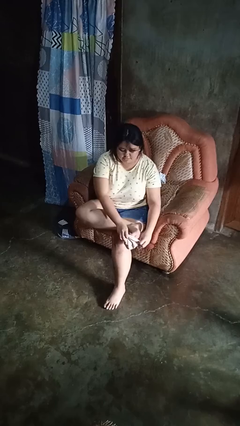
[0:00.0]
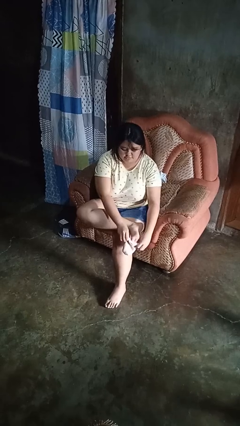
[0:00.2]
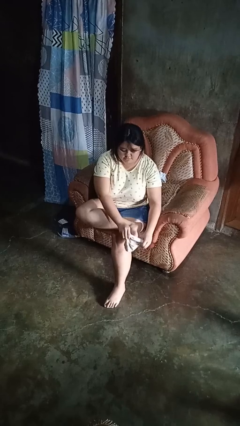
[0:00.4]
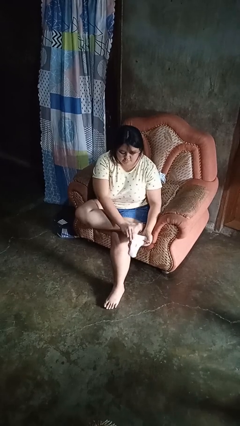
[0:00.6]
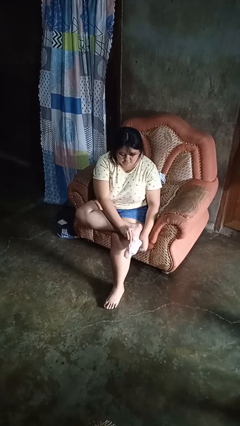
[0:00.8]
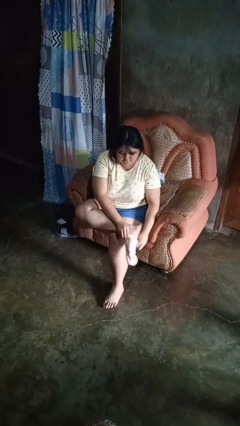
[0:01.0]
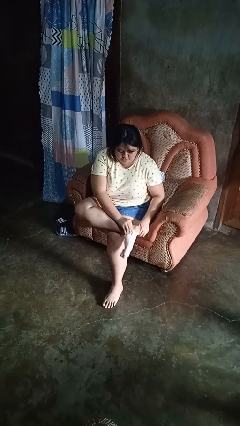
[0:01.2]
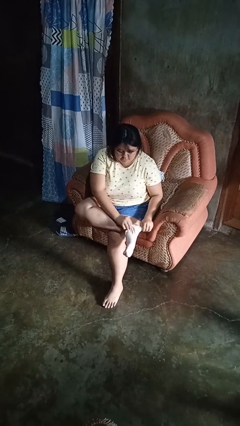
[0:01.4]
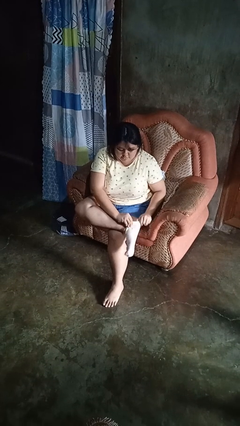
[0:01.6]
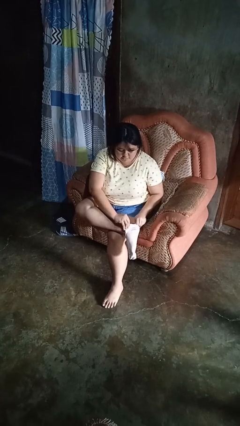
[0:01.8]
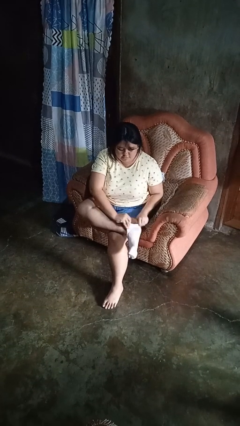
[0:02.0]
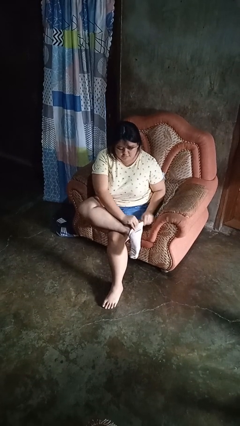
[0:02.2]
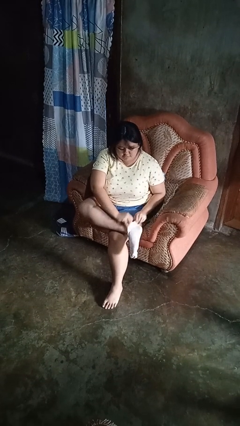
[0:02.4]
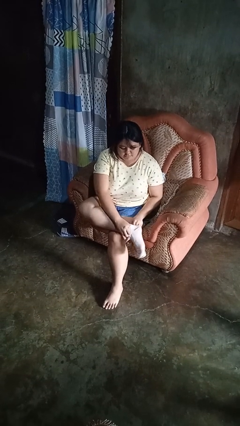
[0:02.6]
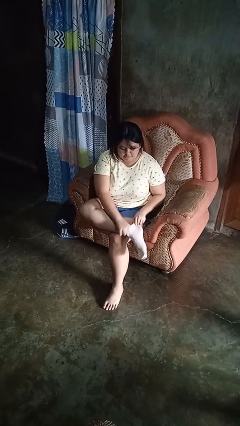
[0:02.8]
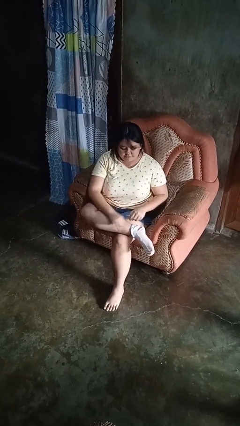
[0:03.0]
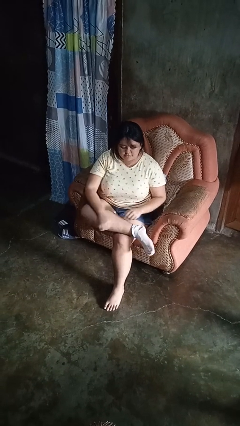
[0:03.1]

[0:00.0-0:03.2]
person puts on socks

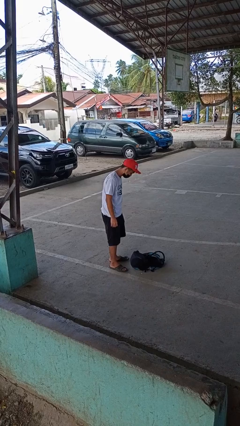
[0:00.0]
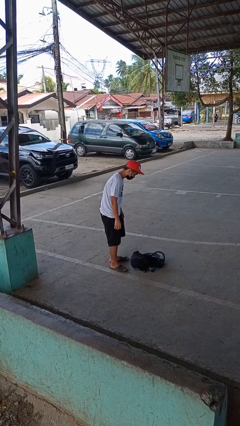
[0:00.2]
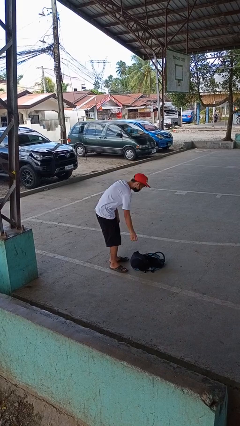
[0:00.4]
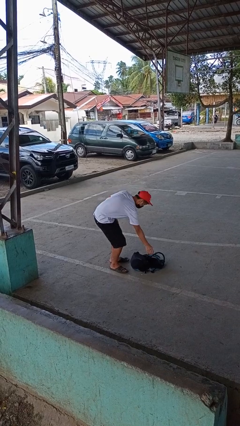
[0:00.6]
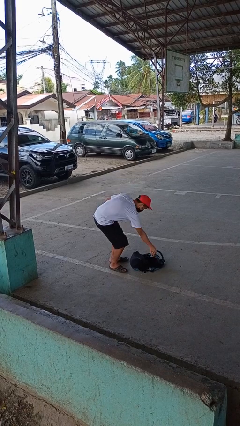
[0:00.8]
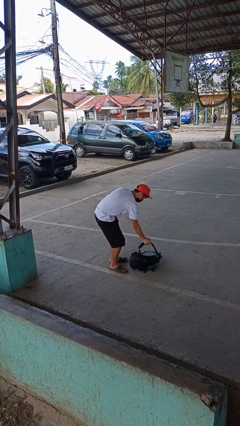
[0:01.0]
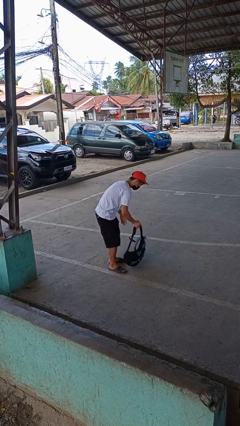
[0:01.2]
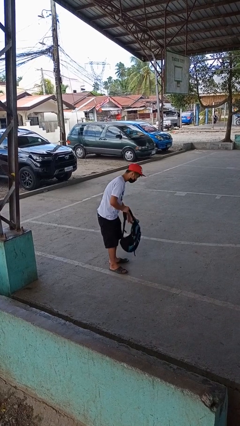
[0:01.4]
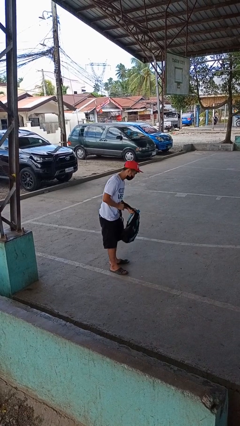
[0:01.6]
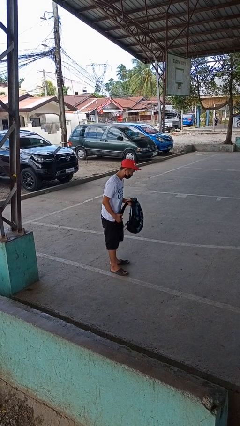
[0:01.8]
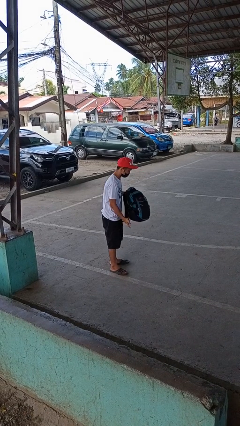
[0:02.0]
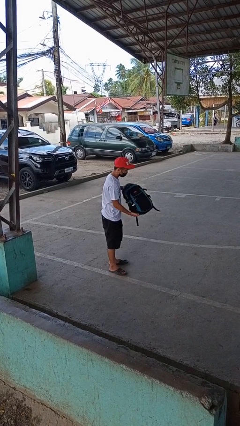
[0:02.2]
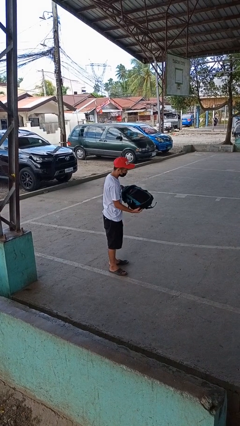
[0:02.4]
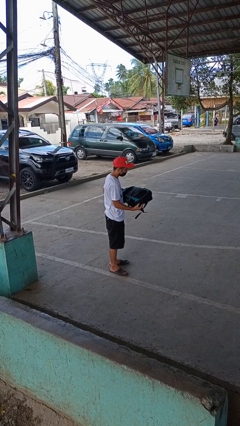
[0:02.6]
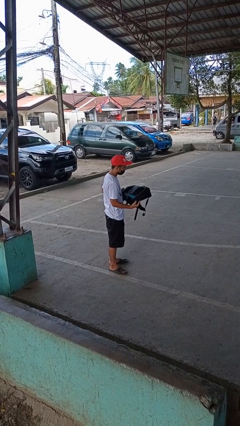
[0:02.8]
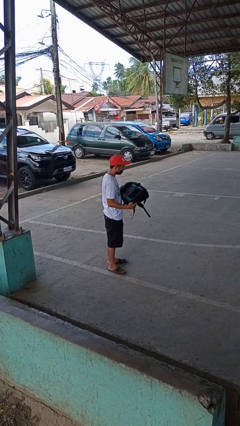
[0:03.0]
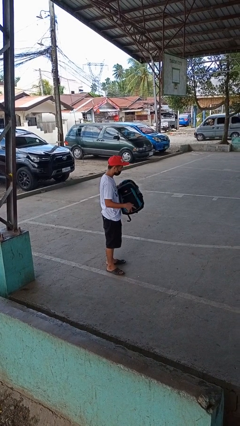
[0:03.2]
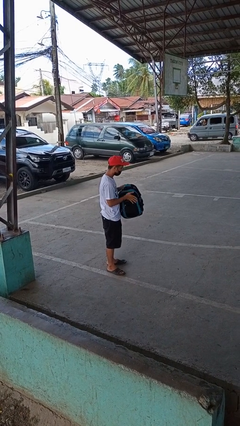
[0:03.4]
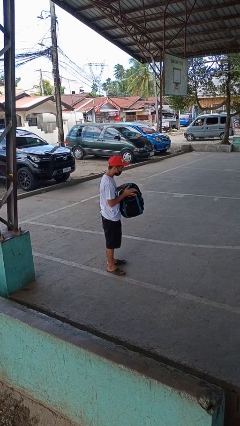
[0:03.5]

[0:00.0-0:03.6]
person picks up object from floor

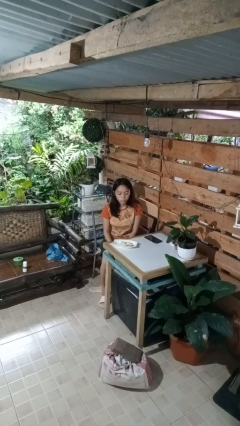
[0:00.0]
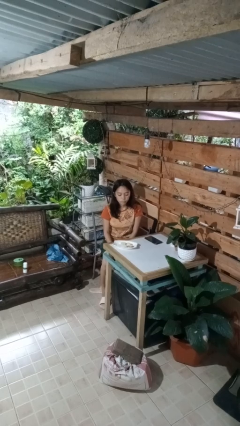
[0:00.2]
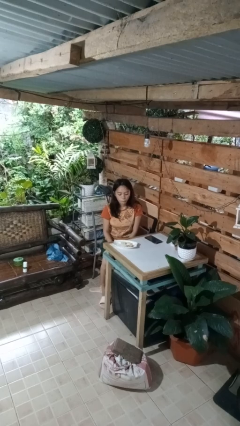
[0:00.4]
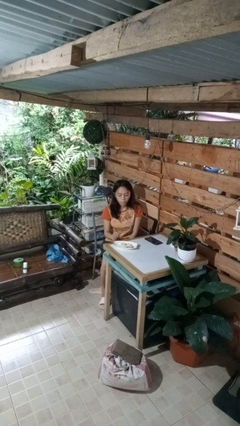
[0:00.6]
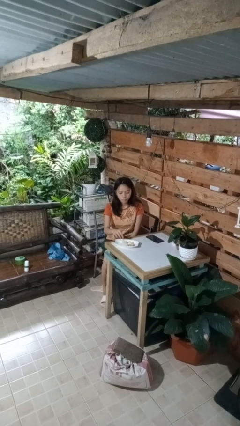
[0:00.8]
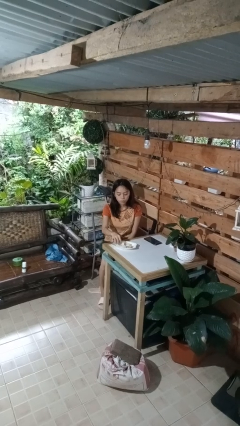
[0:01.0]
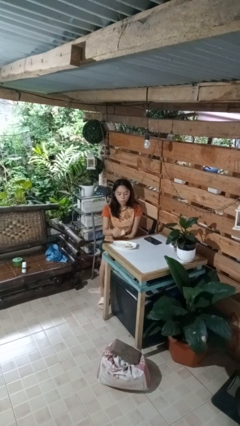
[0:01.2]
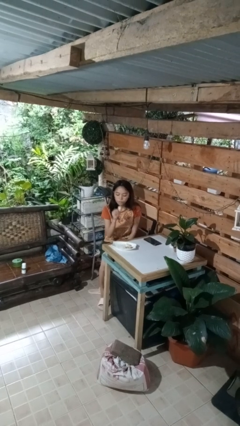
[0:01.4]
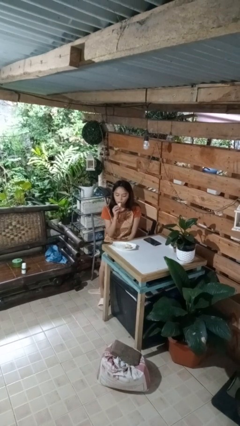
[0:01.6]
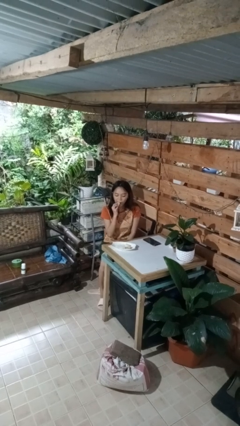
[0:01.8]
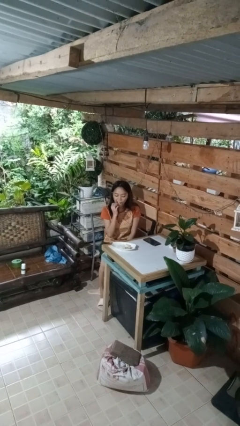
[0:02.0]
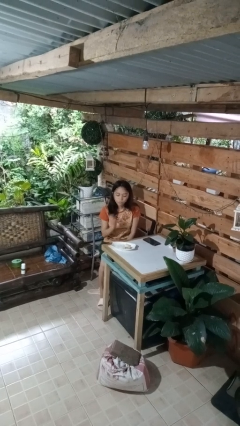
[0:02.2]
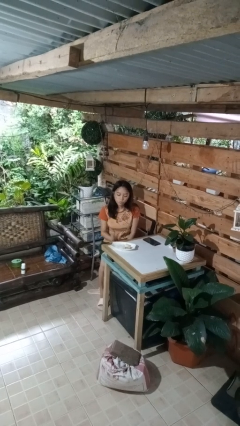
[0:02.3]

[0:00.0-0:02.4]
person eats with hands

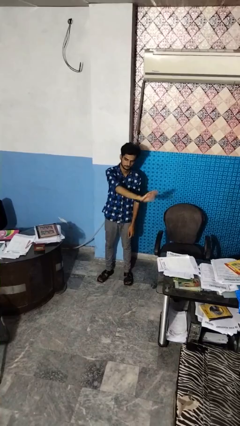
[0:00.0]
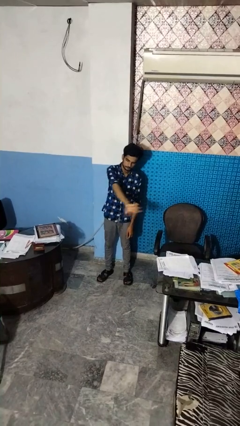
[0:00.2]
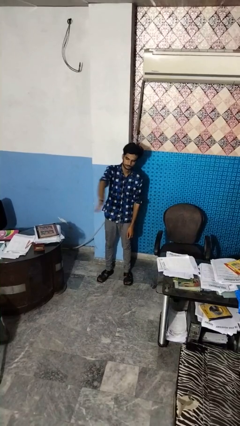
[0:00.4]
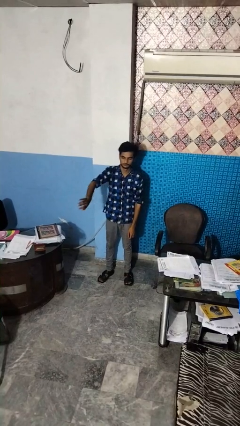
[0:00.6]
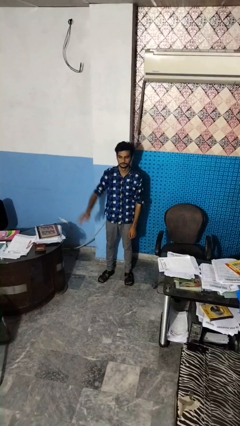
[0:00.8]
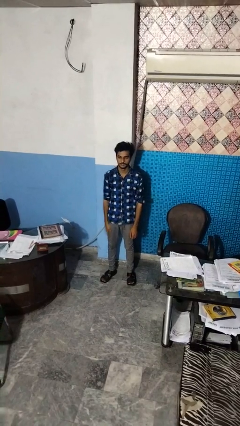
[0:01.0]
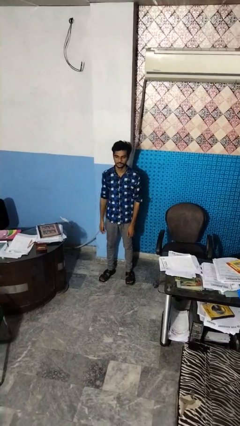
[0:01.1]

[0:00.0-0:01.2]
person gestures swipe right

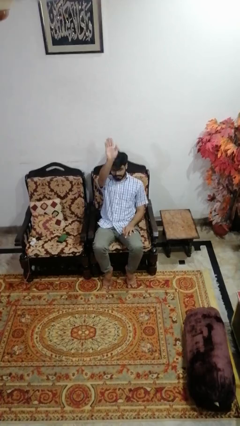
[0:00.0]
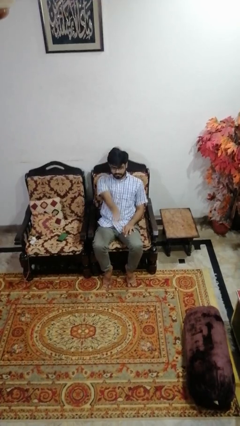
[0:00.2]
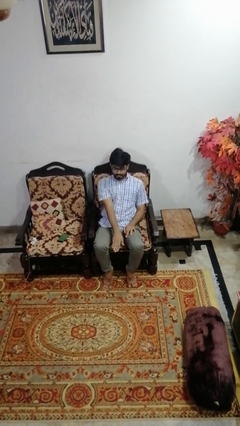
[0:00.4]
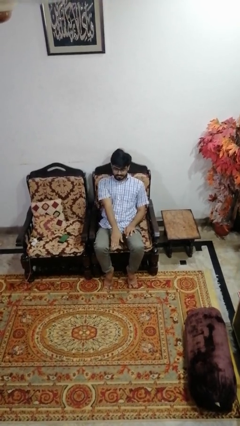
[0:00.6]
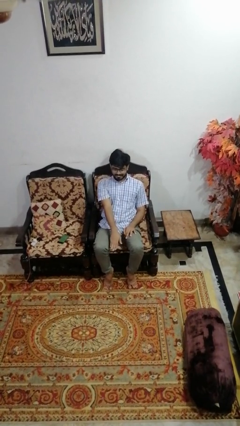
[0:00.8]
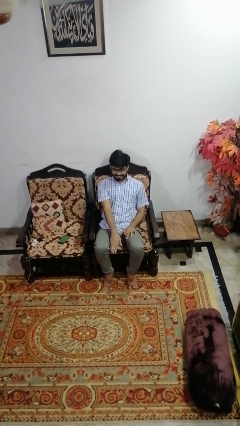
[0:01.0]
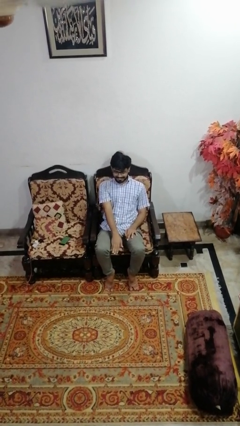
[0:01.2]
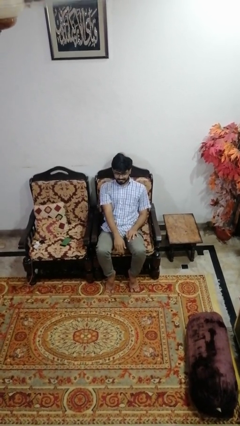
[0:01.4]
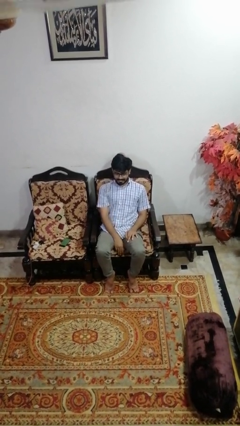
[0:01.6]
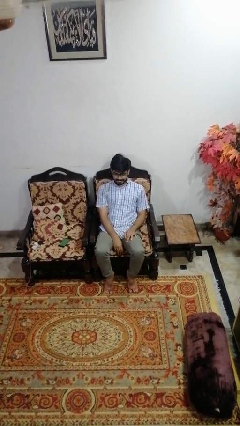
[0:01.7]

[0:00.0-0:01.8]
person gestures swipe down

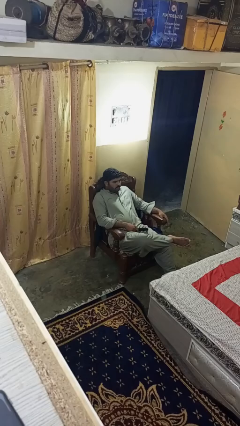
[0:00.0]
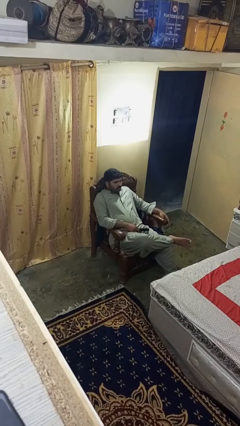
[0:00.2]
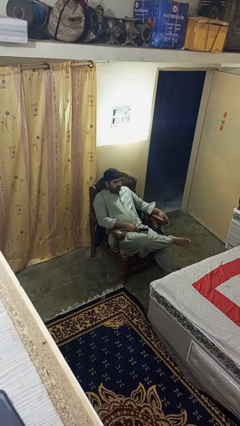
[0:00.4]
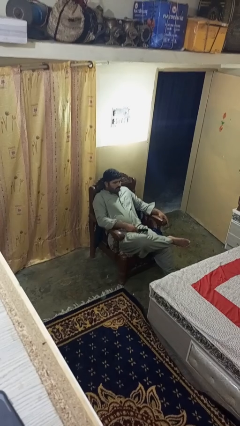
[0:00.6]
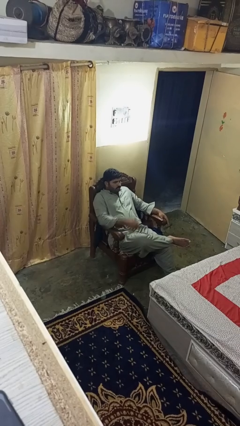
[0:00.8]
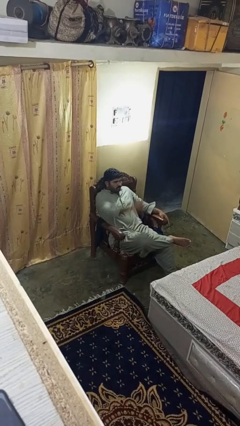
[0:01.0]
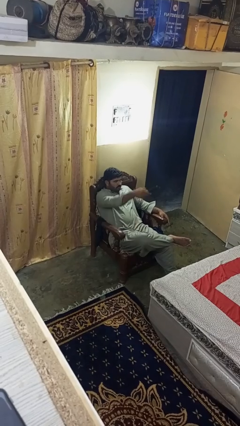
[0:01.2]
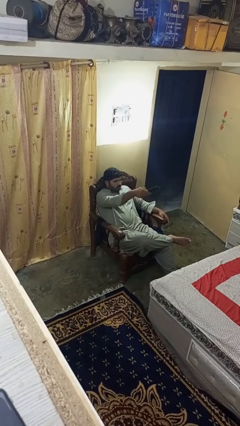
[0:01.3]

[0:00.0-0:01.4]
person uses television remote

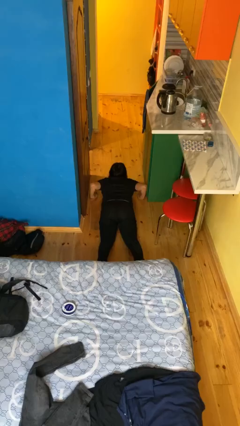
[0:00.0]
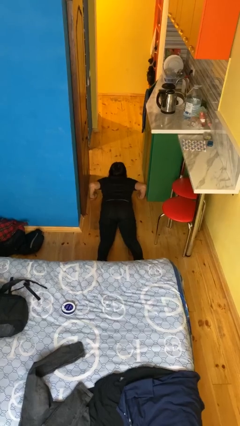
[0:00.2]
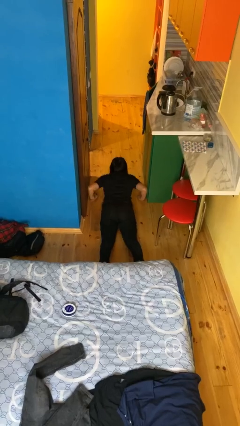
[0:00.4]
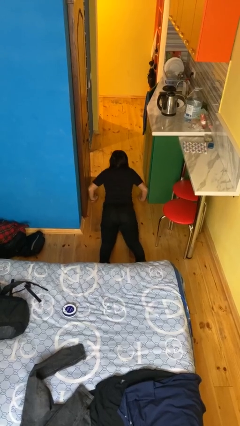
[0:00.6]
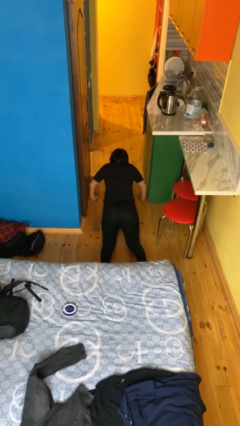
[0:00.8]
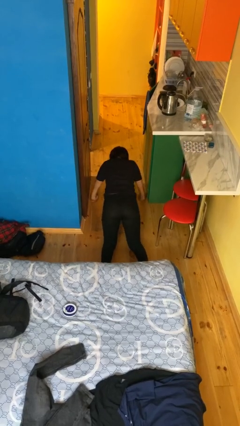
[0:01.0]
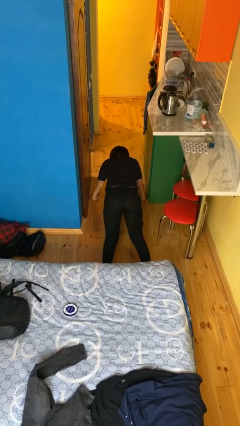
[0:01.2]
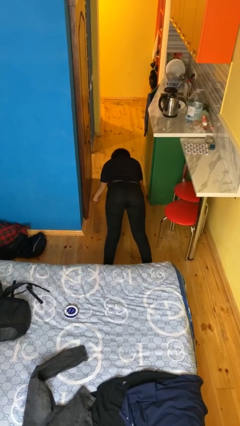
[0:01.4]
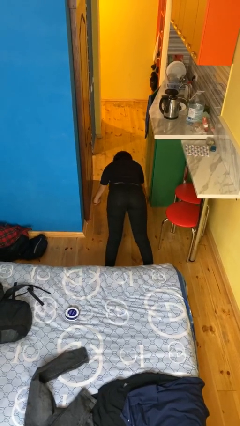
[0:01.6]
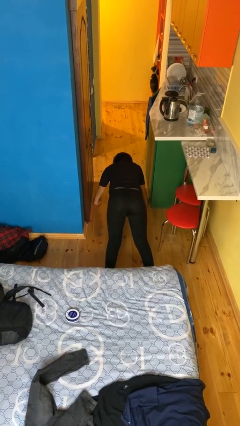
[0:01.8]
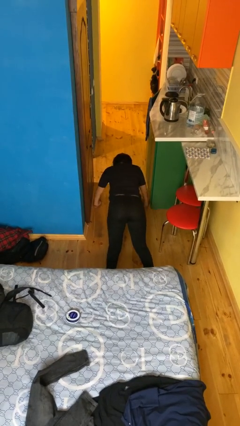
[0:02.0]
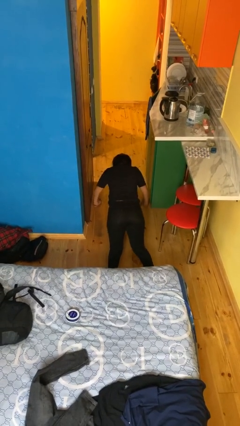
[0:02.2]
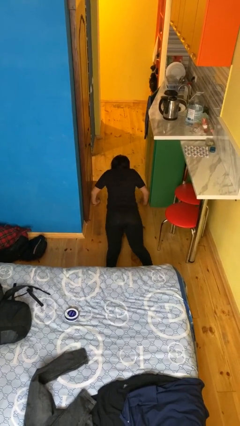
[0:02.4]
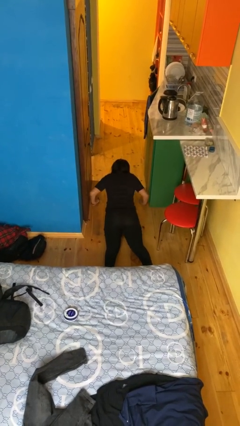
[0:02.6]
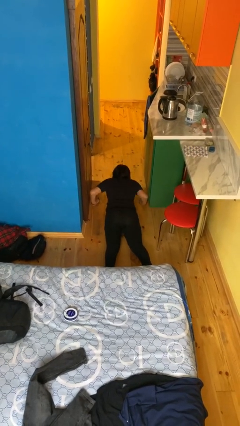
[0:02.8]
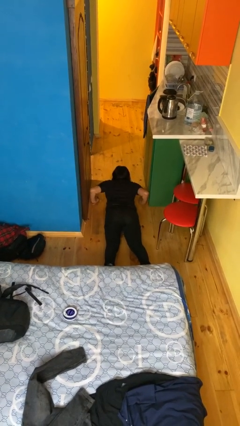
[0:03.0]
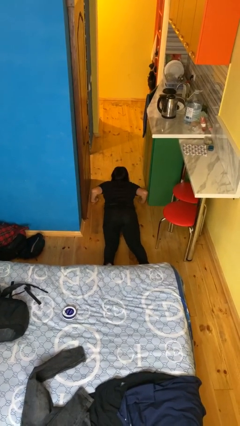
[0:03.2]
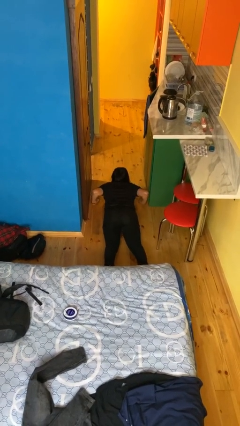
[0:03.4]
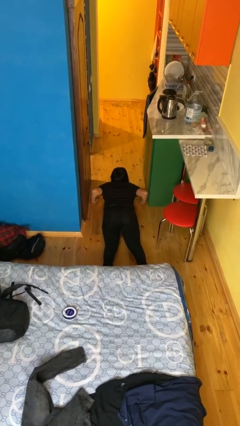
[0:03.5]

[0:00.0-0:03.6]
person exercises with pushup
